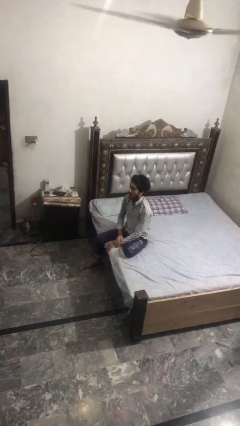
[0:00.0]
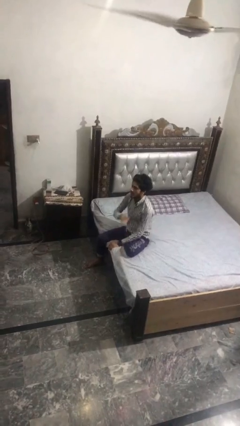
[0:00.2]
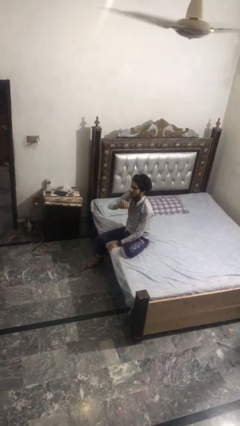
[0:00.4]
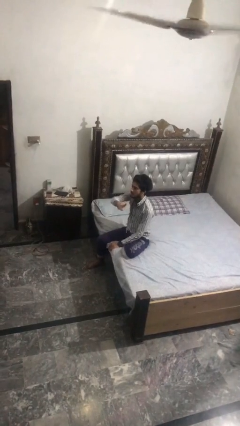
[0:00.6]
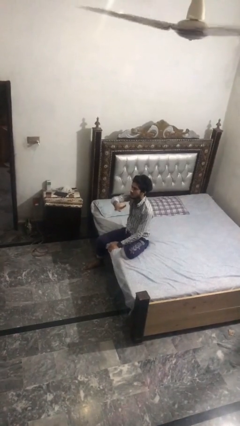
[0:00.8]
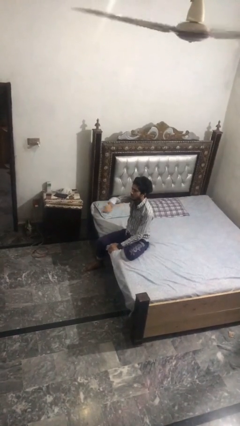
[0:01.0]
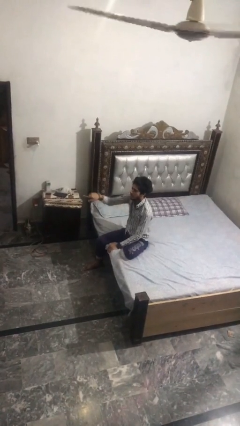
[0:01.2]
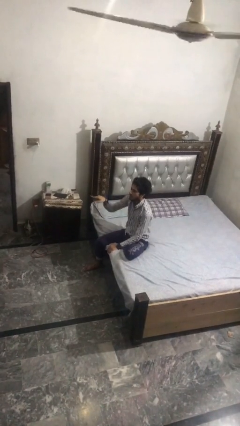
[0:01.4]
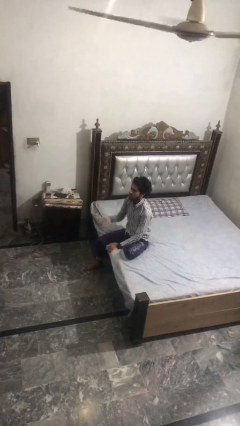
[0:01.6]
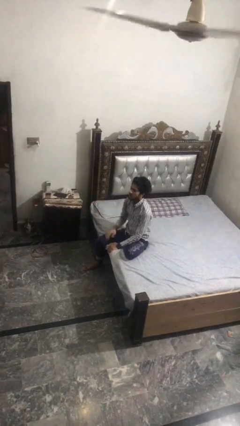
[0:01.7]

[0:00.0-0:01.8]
person gestures swipe right

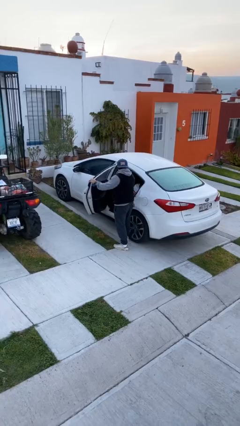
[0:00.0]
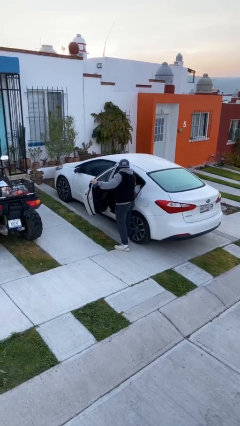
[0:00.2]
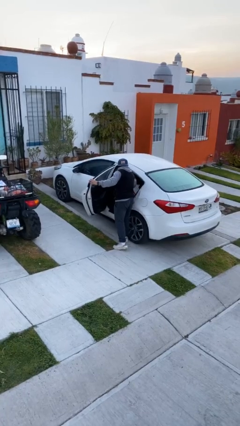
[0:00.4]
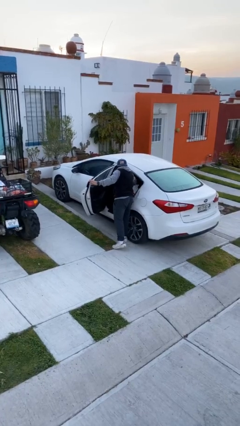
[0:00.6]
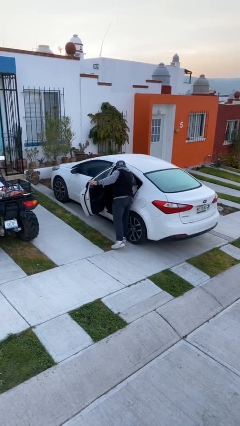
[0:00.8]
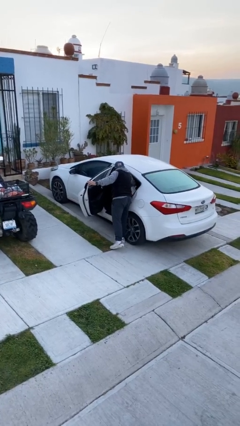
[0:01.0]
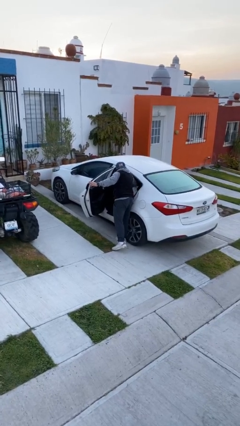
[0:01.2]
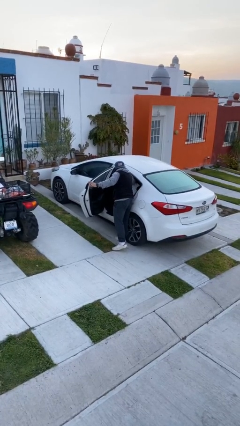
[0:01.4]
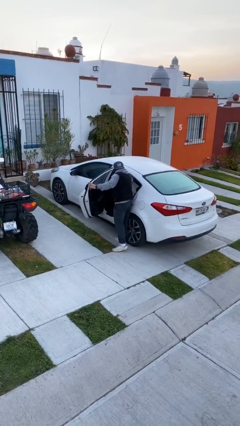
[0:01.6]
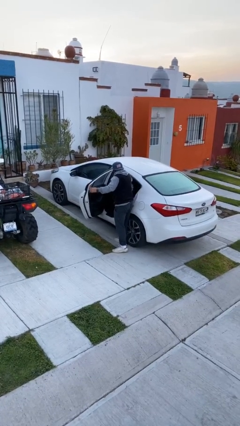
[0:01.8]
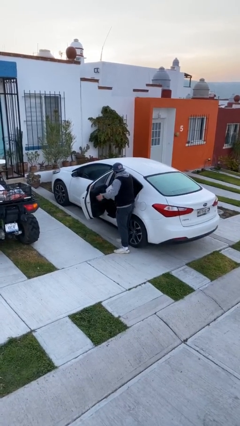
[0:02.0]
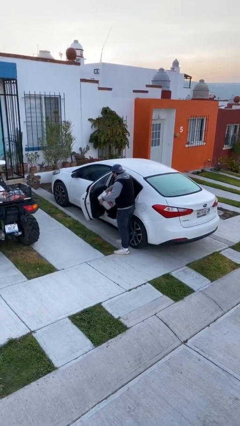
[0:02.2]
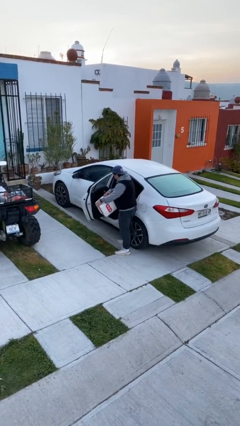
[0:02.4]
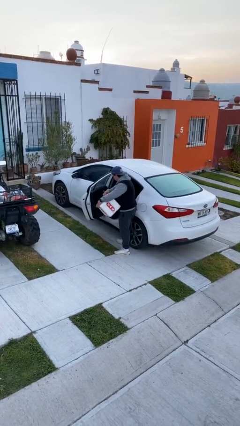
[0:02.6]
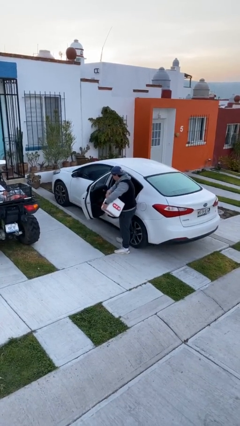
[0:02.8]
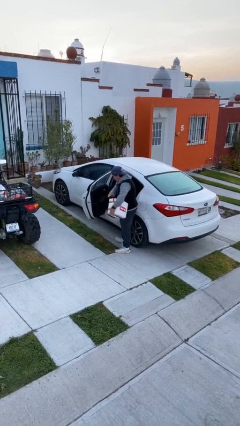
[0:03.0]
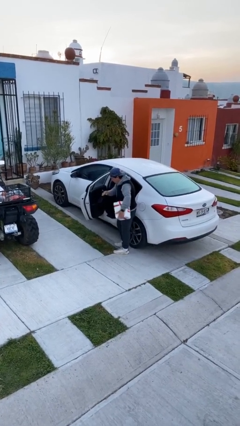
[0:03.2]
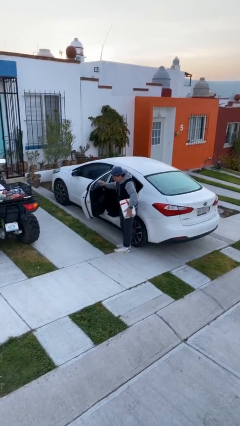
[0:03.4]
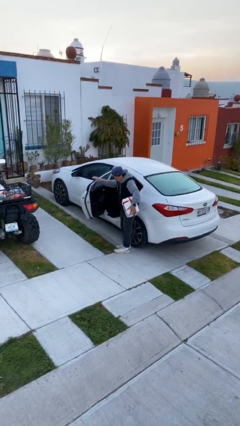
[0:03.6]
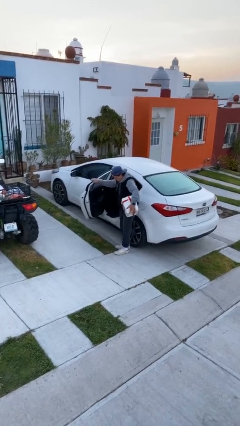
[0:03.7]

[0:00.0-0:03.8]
person unloads car

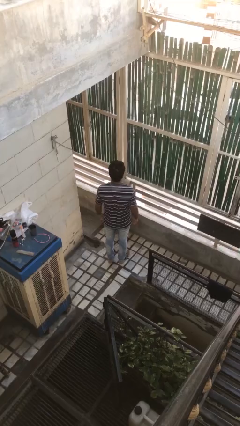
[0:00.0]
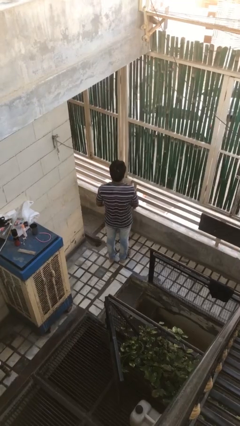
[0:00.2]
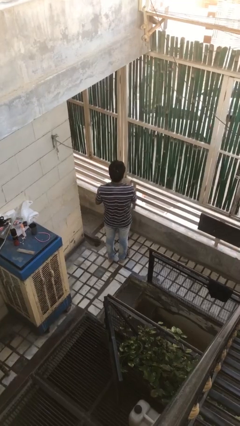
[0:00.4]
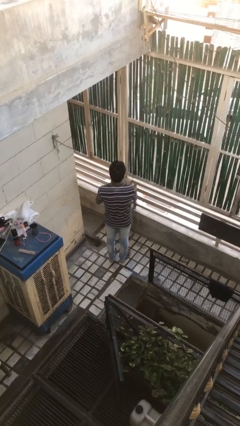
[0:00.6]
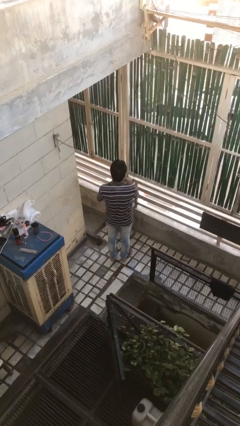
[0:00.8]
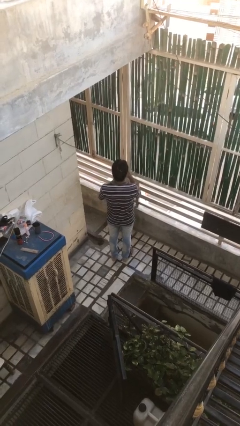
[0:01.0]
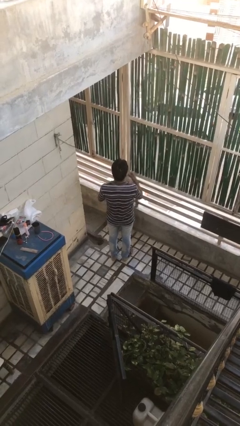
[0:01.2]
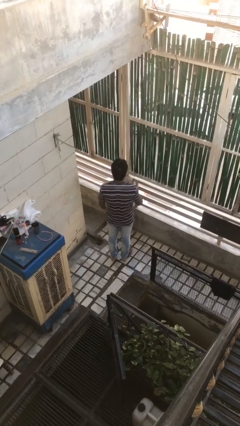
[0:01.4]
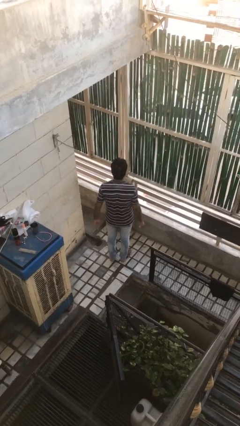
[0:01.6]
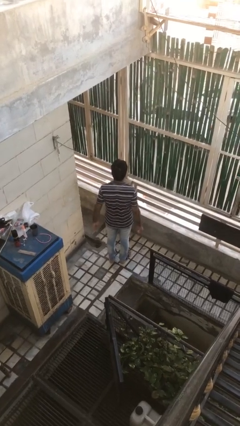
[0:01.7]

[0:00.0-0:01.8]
person takes off ring

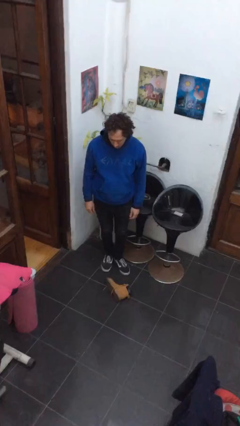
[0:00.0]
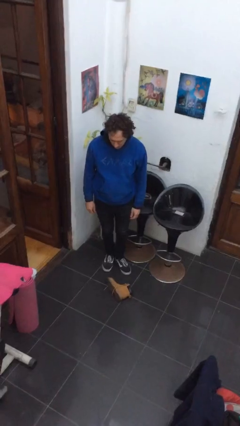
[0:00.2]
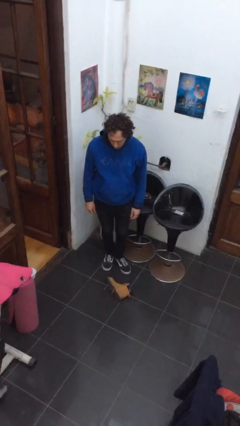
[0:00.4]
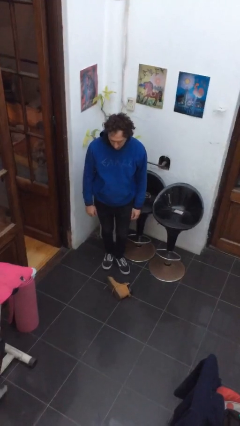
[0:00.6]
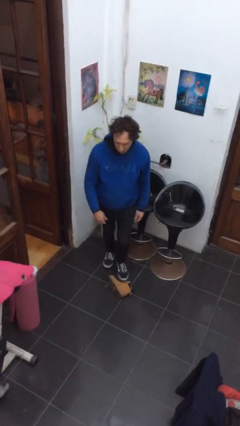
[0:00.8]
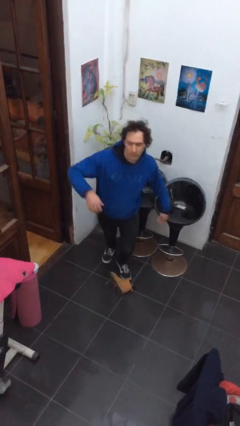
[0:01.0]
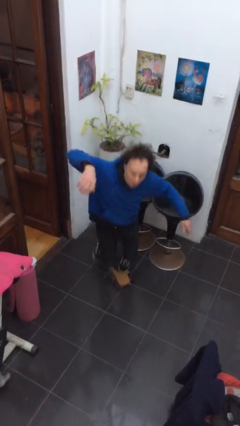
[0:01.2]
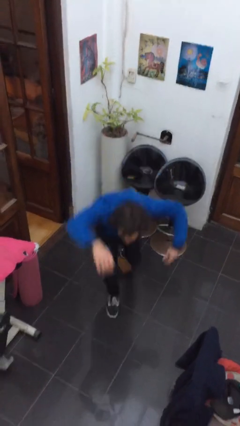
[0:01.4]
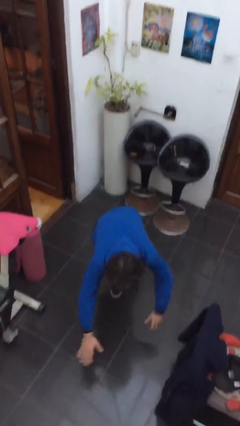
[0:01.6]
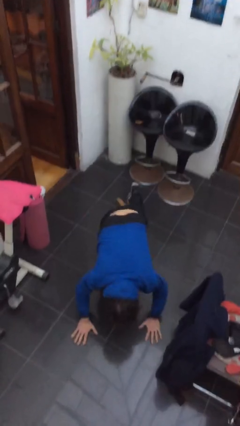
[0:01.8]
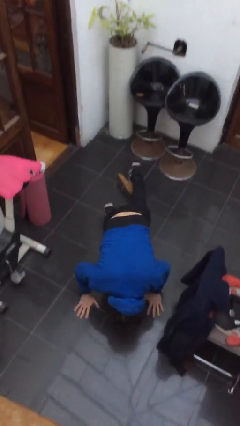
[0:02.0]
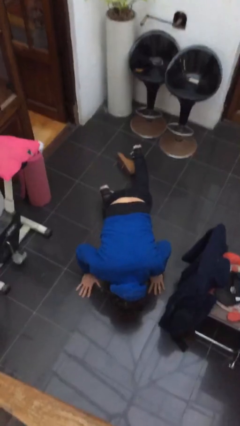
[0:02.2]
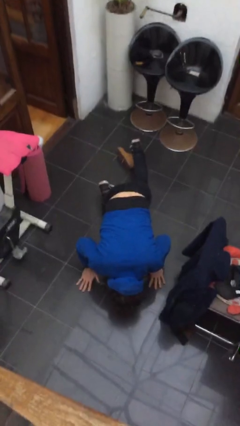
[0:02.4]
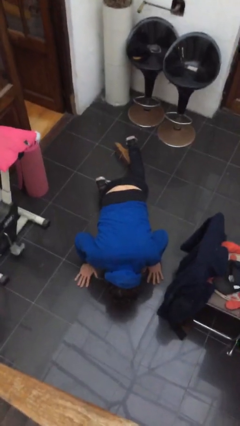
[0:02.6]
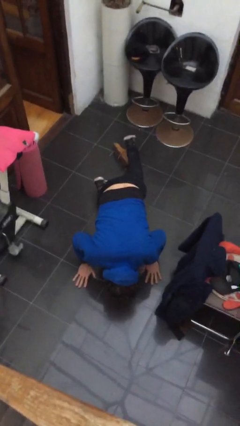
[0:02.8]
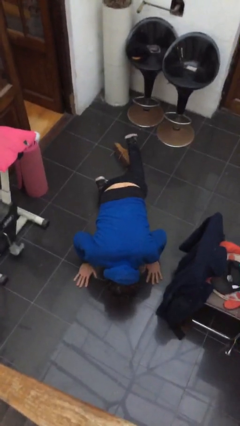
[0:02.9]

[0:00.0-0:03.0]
person trips on object on floor

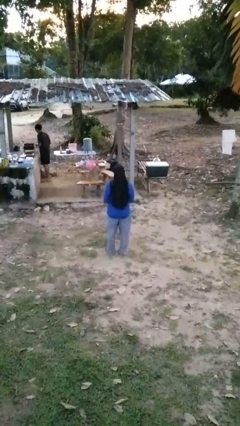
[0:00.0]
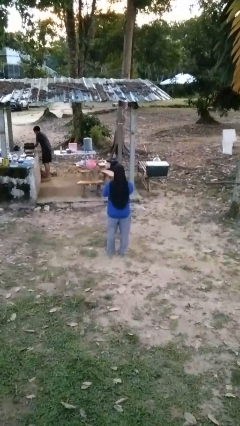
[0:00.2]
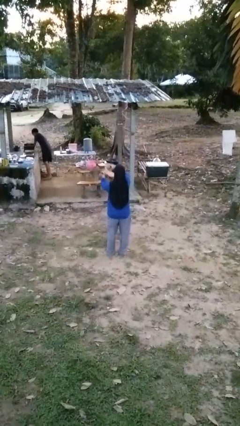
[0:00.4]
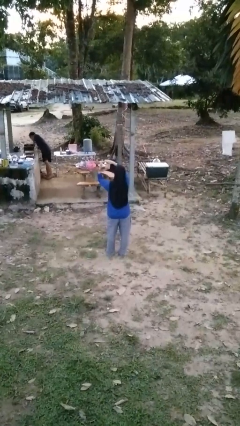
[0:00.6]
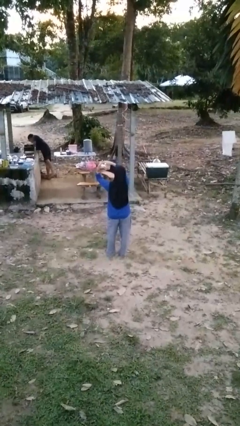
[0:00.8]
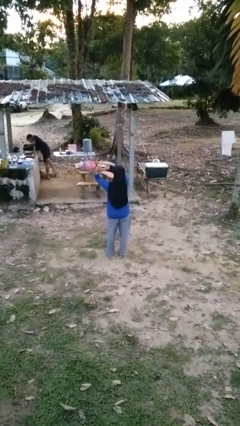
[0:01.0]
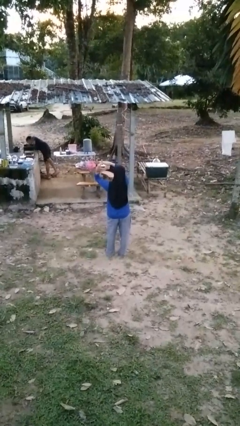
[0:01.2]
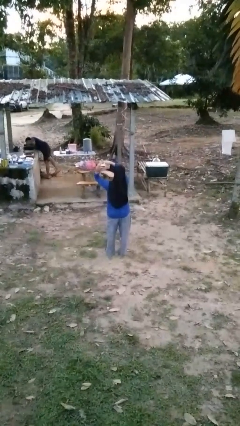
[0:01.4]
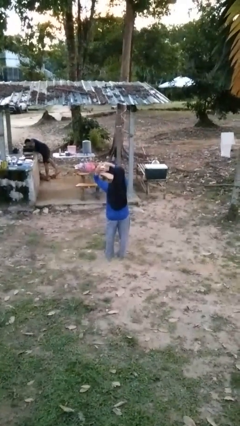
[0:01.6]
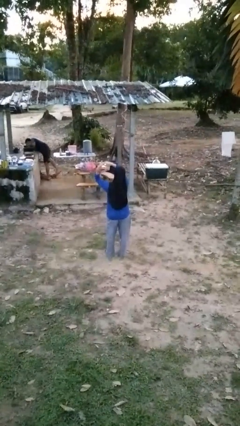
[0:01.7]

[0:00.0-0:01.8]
person gestures heart

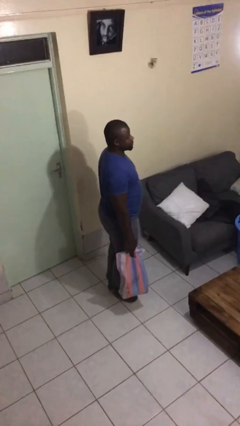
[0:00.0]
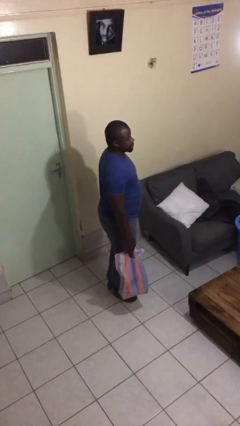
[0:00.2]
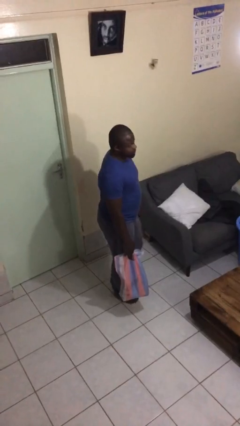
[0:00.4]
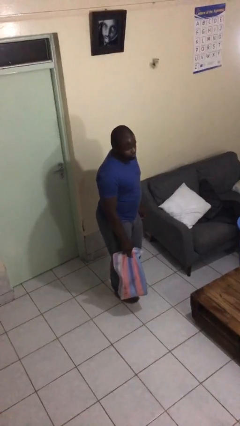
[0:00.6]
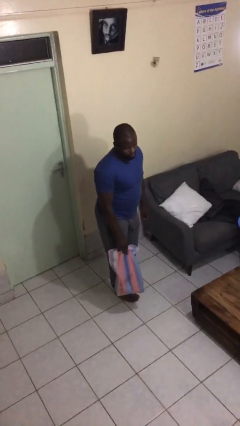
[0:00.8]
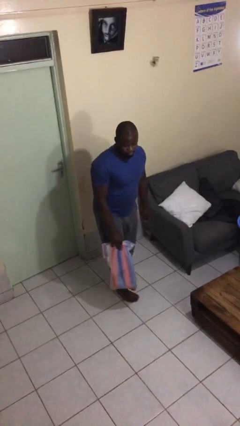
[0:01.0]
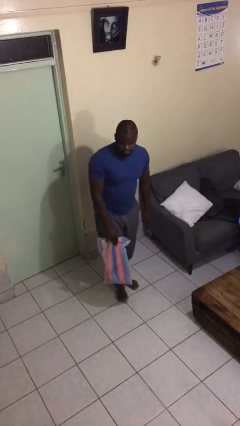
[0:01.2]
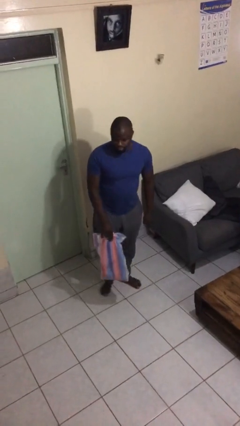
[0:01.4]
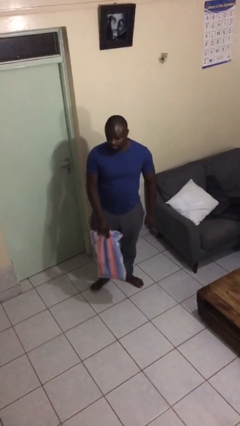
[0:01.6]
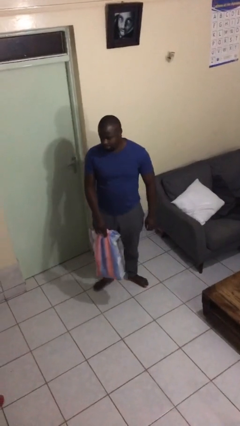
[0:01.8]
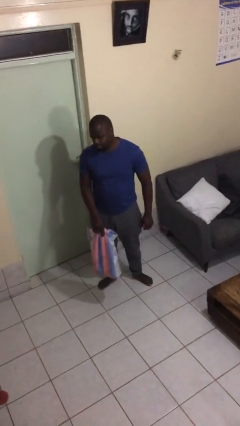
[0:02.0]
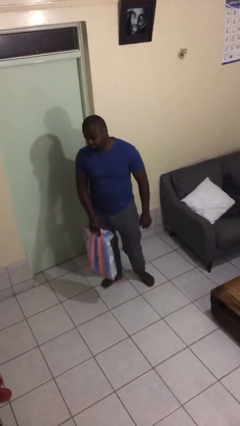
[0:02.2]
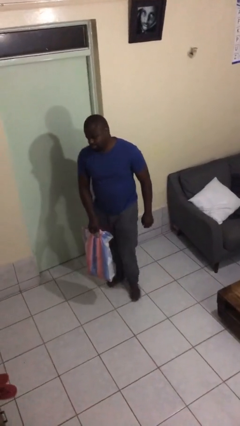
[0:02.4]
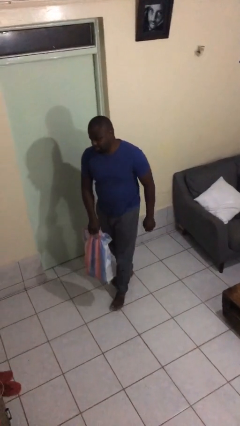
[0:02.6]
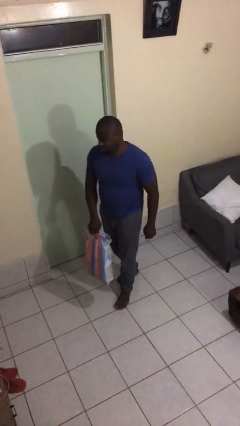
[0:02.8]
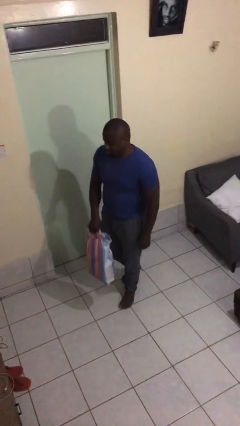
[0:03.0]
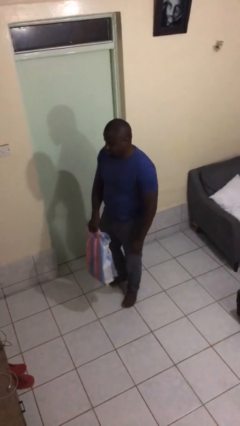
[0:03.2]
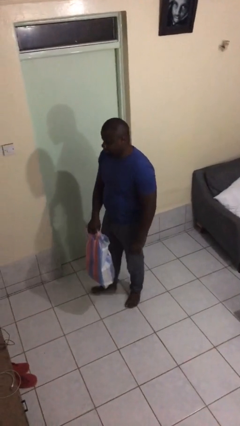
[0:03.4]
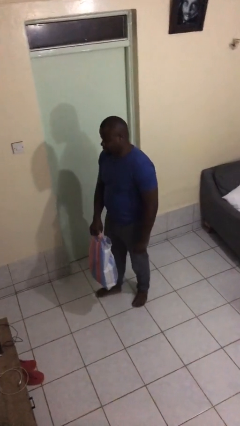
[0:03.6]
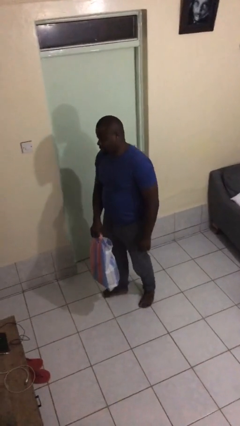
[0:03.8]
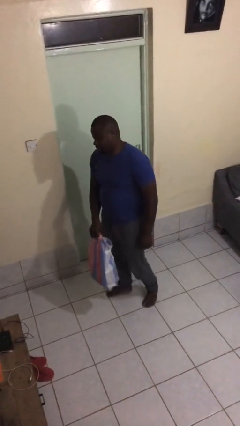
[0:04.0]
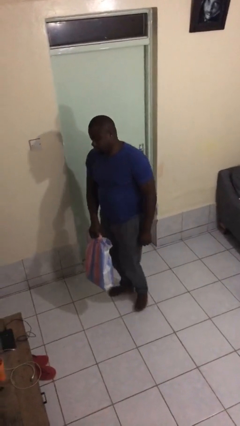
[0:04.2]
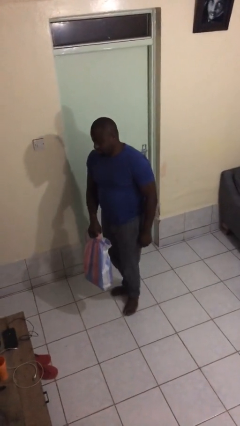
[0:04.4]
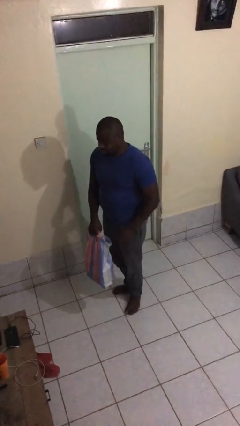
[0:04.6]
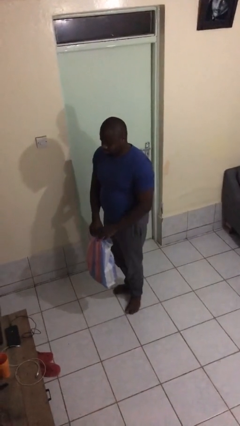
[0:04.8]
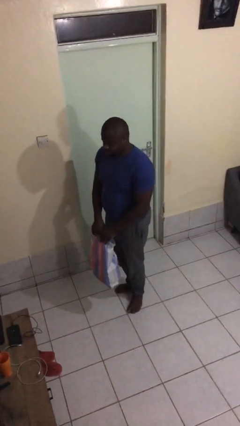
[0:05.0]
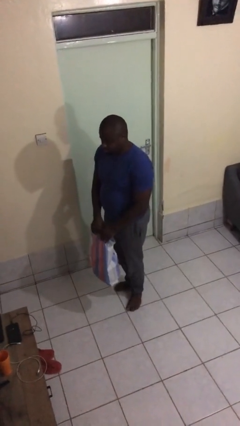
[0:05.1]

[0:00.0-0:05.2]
person carries groceries
